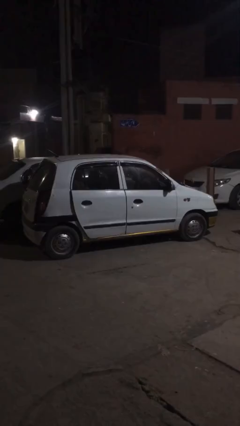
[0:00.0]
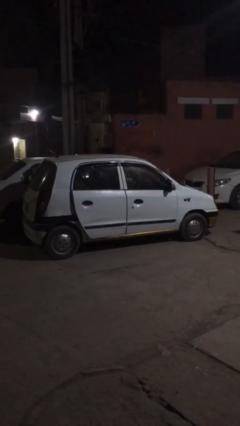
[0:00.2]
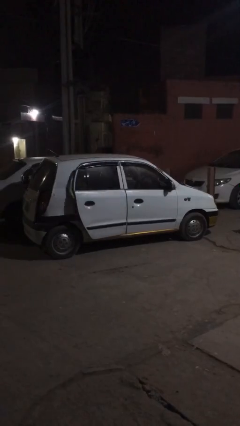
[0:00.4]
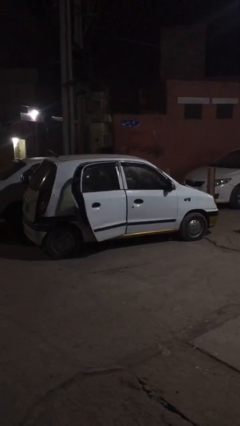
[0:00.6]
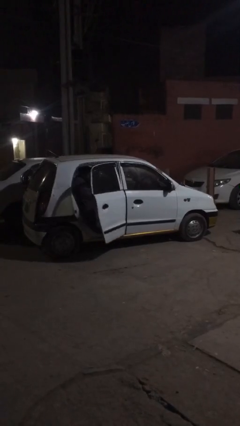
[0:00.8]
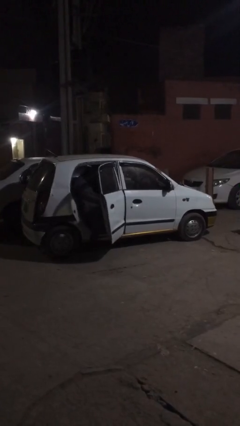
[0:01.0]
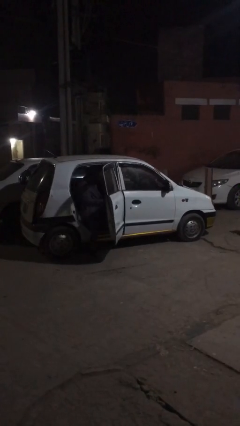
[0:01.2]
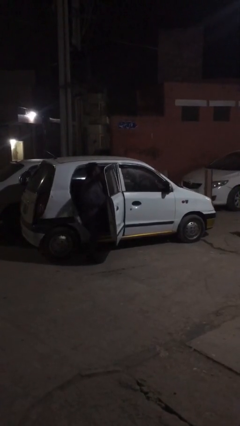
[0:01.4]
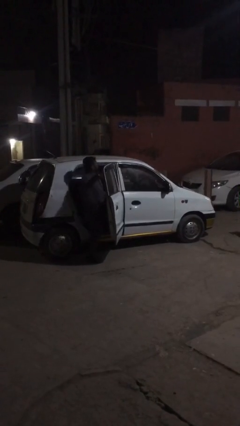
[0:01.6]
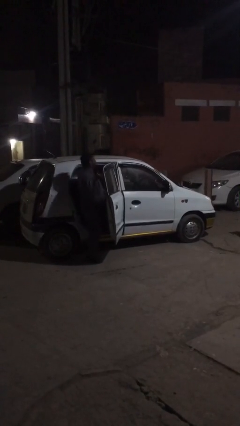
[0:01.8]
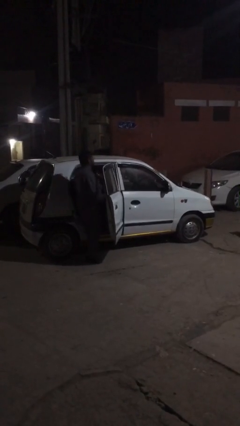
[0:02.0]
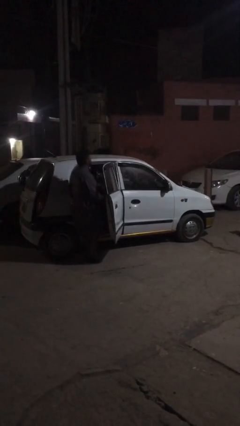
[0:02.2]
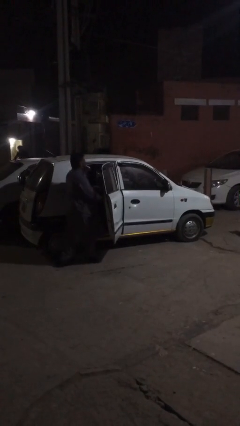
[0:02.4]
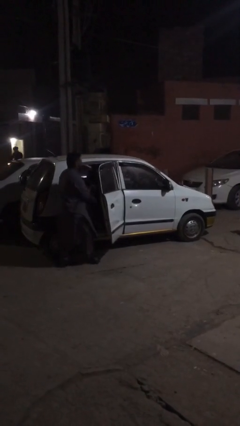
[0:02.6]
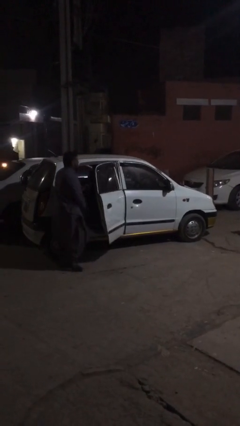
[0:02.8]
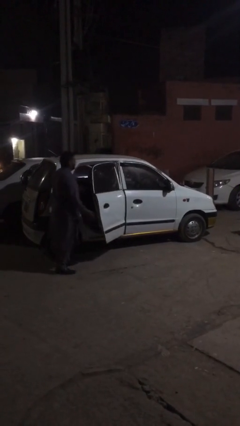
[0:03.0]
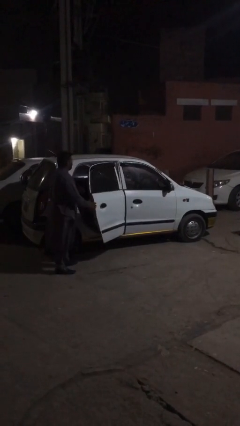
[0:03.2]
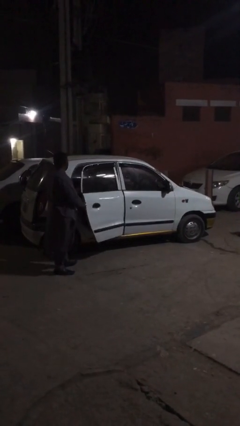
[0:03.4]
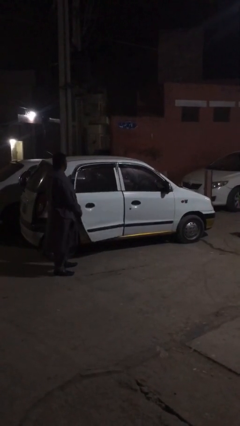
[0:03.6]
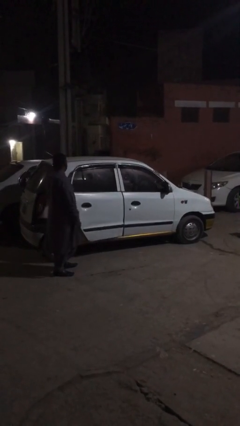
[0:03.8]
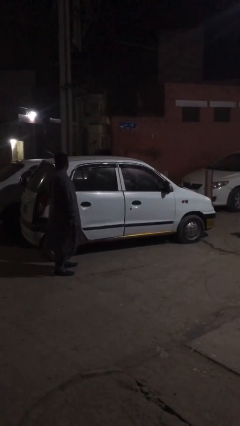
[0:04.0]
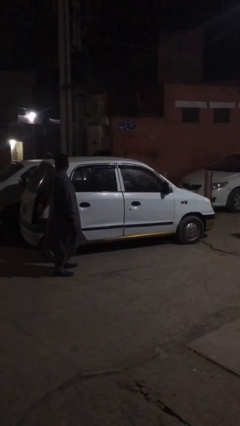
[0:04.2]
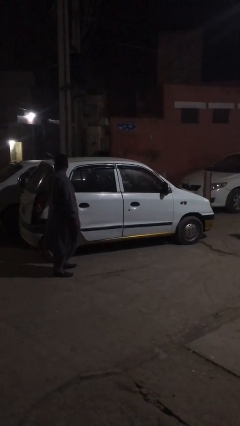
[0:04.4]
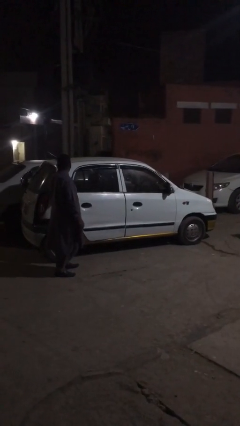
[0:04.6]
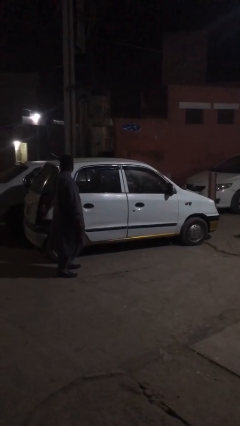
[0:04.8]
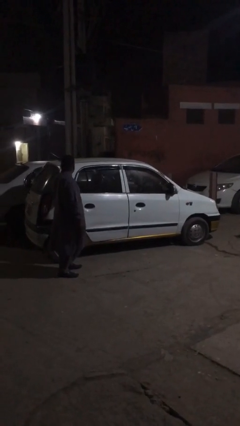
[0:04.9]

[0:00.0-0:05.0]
car drops off person

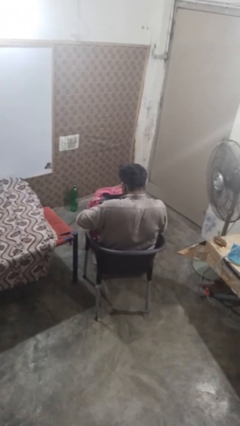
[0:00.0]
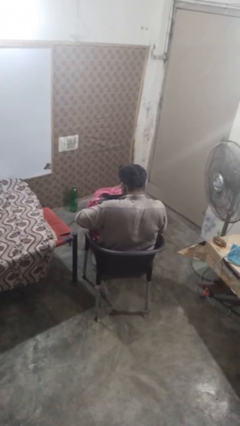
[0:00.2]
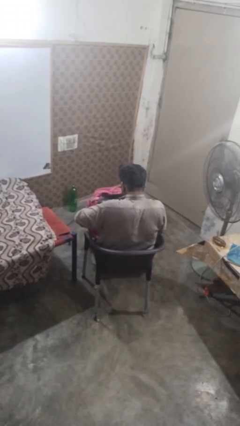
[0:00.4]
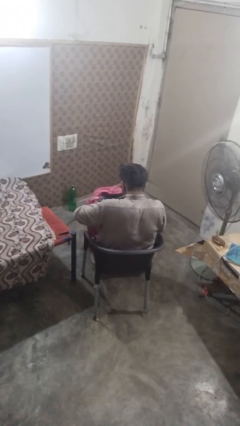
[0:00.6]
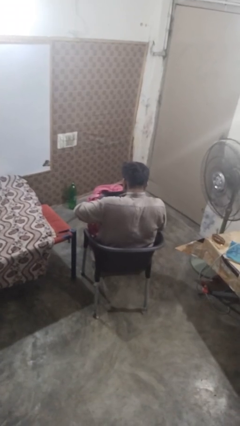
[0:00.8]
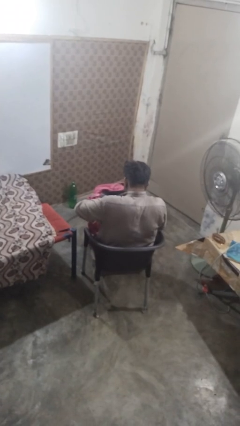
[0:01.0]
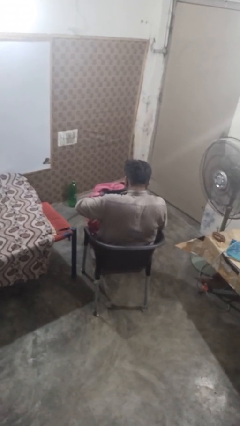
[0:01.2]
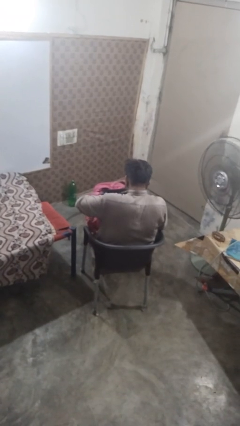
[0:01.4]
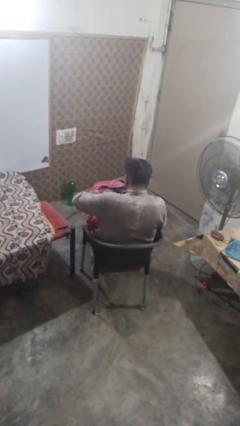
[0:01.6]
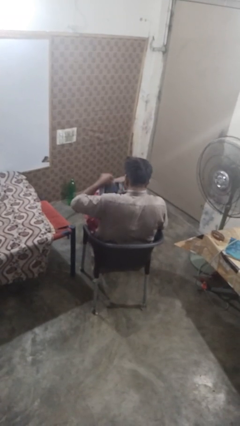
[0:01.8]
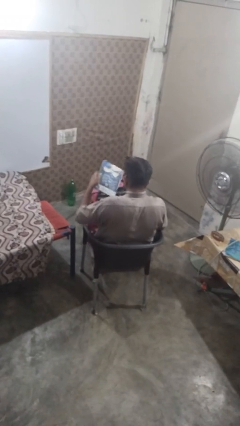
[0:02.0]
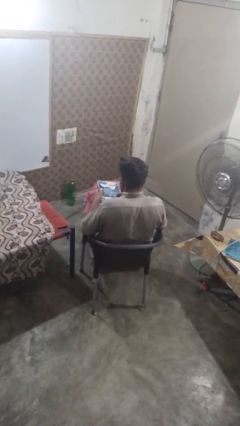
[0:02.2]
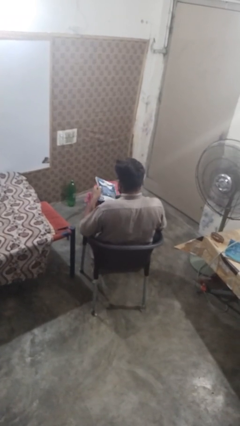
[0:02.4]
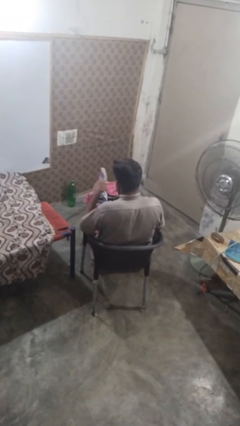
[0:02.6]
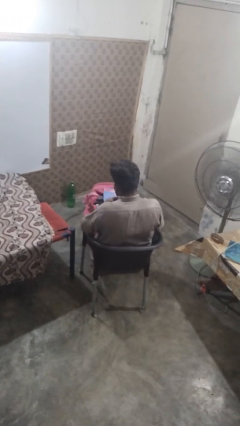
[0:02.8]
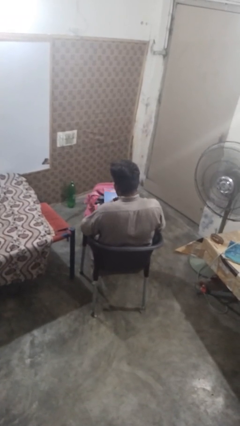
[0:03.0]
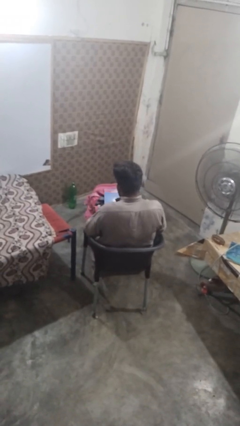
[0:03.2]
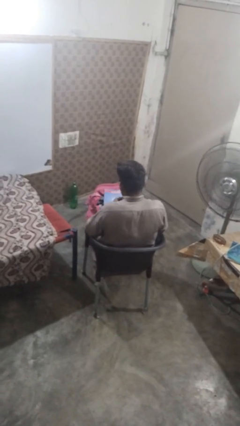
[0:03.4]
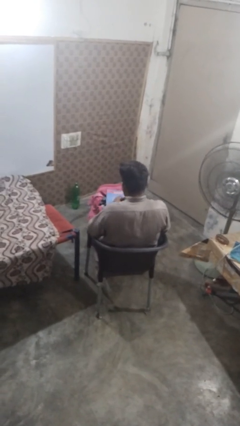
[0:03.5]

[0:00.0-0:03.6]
person takes object from backpack

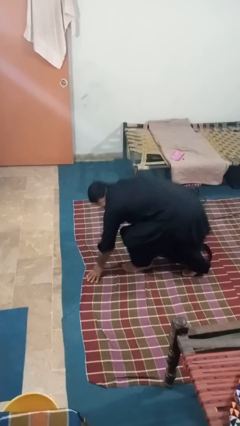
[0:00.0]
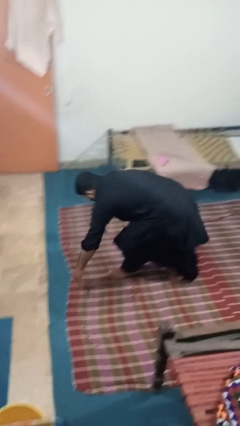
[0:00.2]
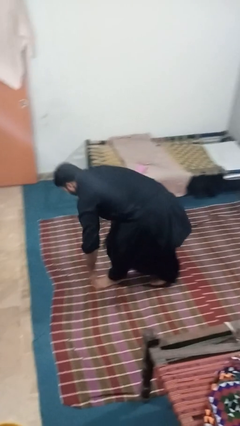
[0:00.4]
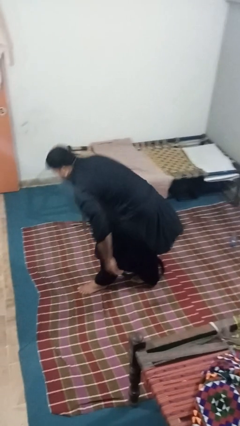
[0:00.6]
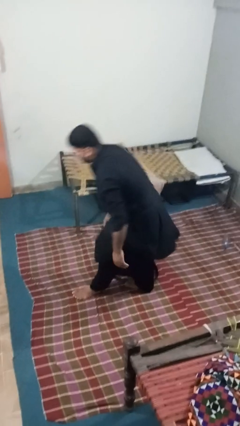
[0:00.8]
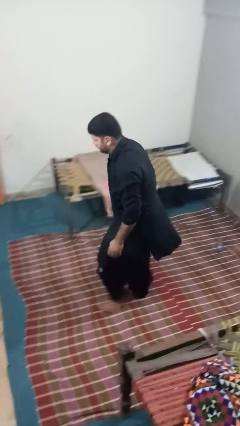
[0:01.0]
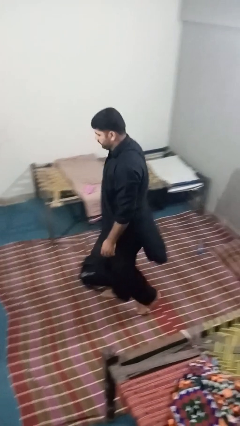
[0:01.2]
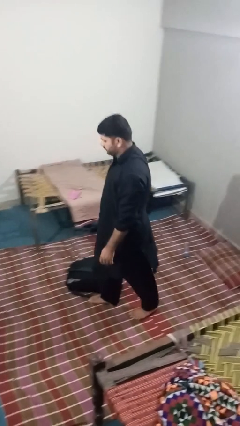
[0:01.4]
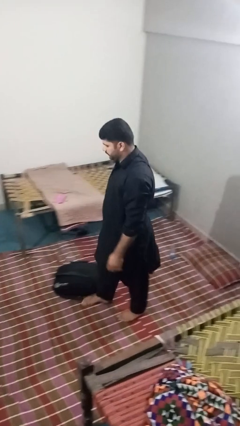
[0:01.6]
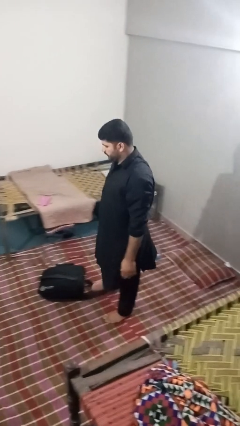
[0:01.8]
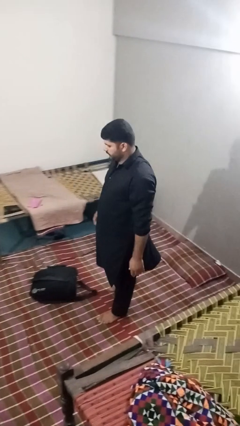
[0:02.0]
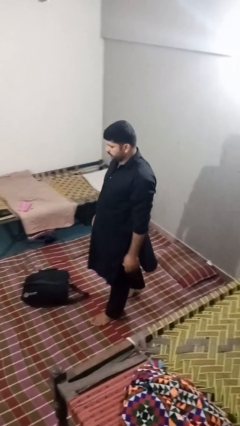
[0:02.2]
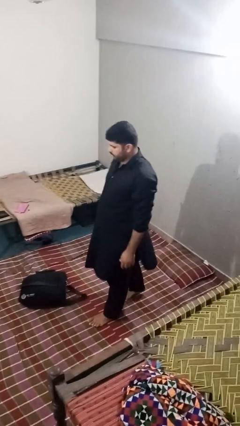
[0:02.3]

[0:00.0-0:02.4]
person stands up from floor

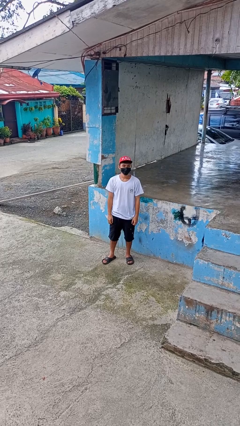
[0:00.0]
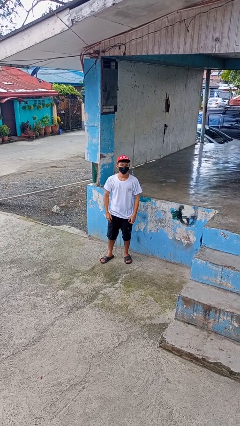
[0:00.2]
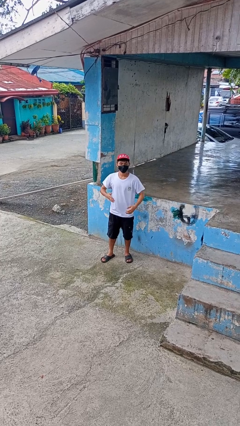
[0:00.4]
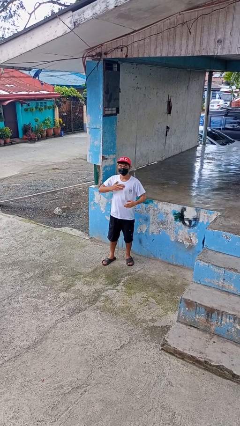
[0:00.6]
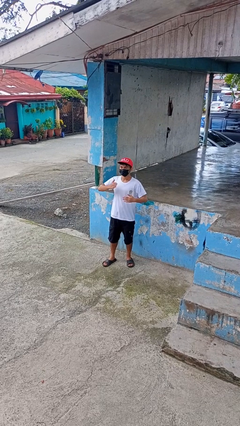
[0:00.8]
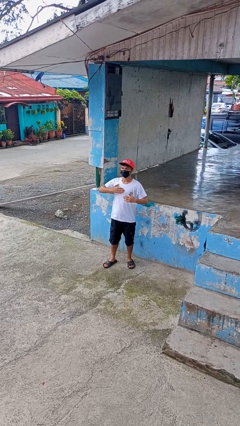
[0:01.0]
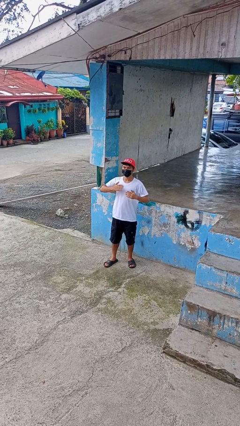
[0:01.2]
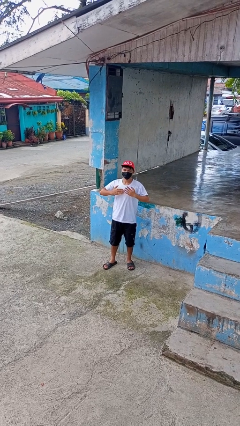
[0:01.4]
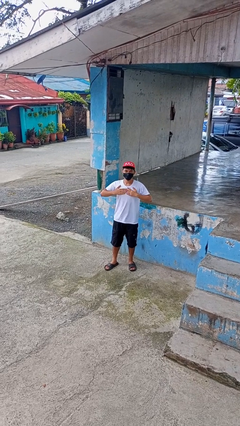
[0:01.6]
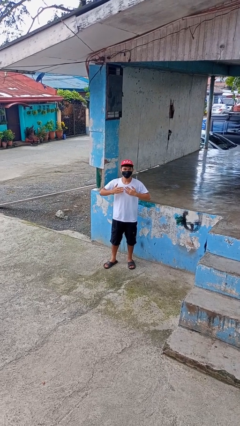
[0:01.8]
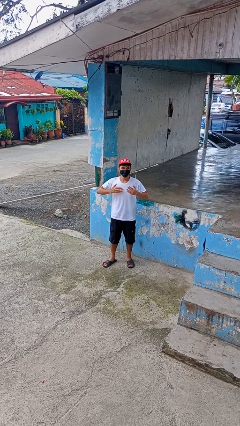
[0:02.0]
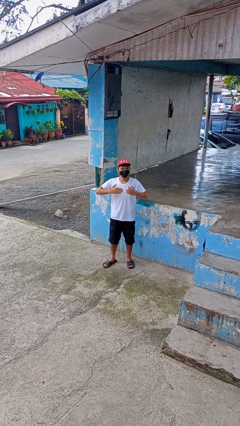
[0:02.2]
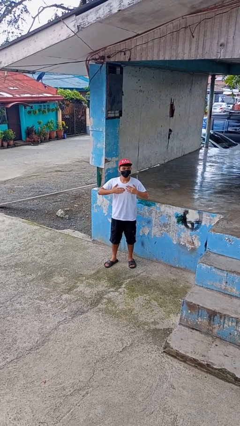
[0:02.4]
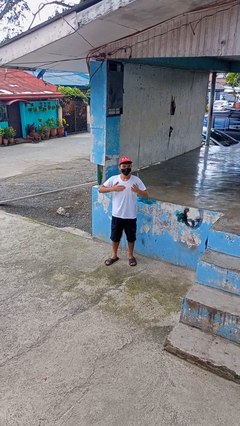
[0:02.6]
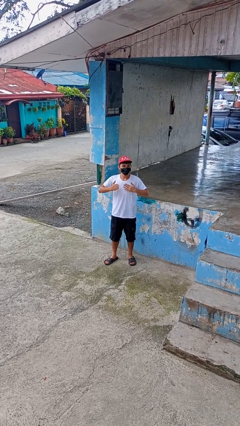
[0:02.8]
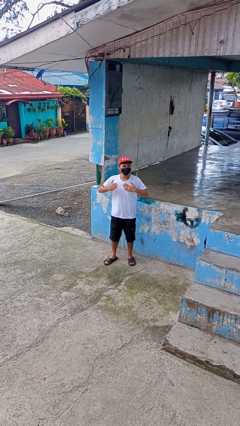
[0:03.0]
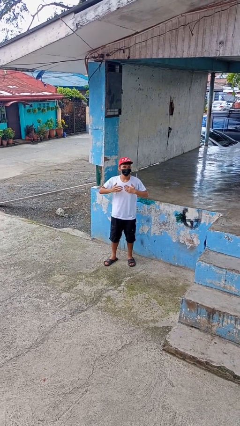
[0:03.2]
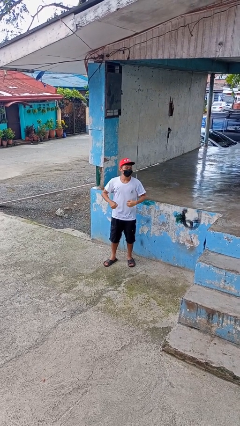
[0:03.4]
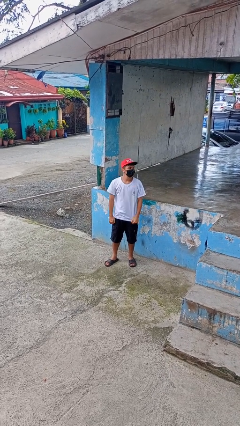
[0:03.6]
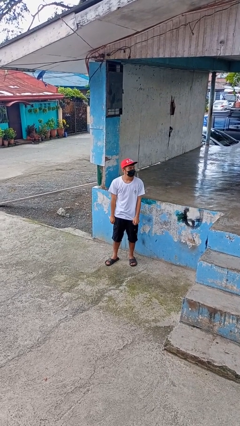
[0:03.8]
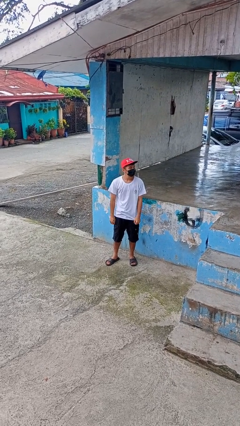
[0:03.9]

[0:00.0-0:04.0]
person drums on chest

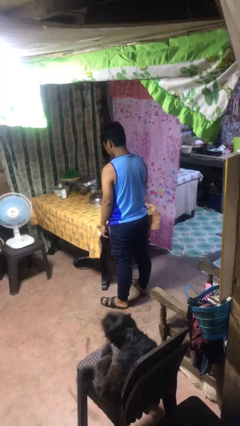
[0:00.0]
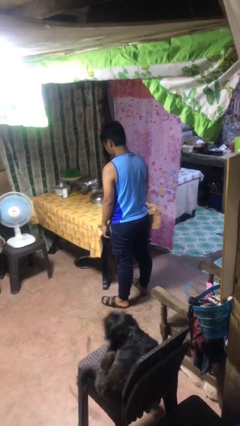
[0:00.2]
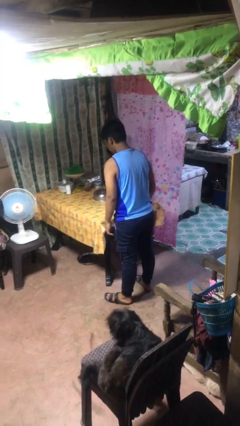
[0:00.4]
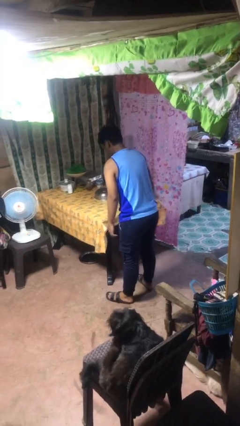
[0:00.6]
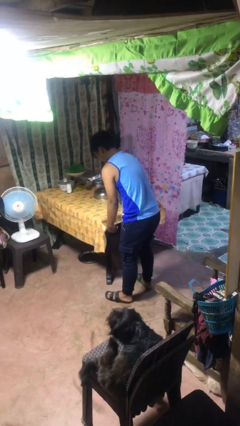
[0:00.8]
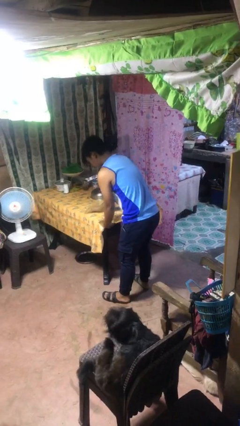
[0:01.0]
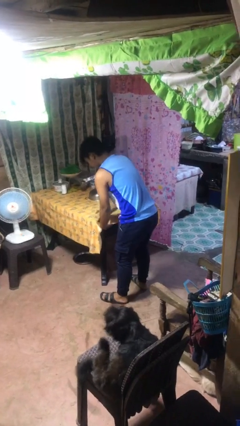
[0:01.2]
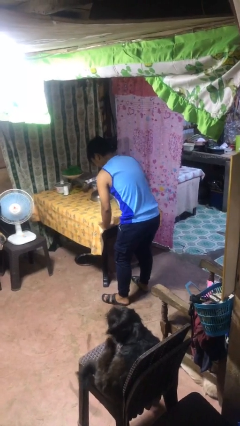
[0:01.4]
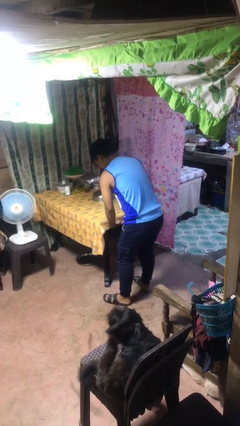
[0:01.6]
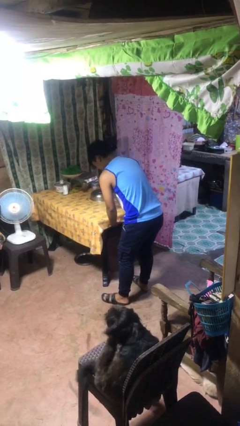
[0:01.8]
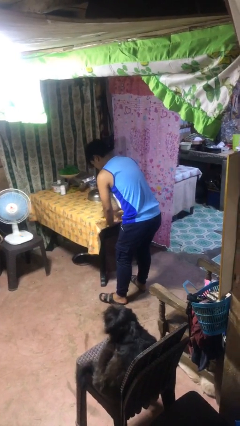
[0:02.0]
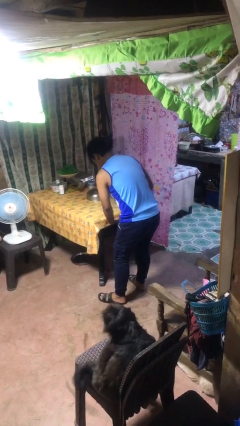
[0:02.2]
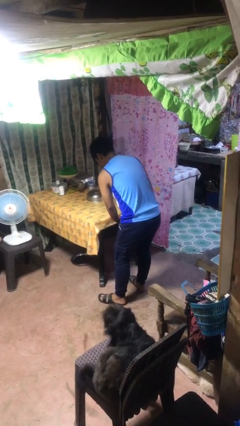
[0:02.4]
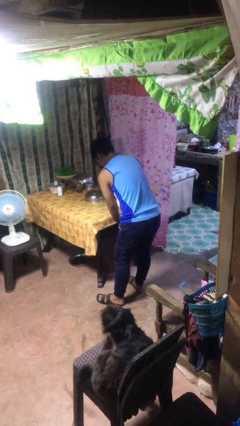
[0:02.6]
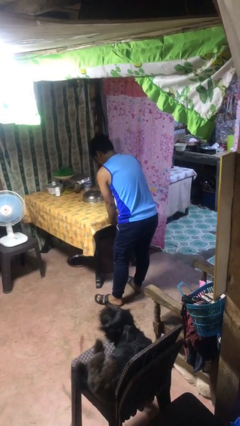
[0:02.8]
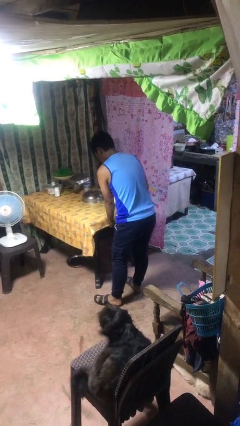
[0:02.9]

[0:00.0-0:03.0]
person cleans table with rag
